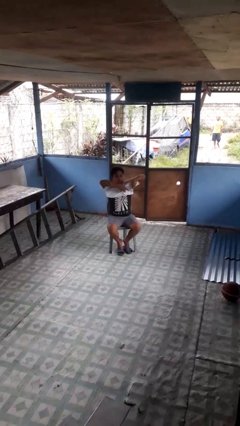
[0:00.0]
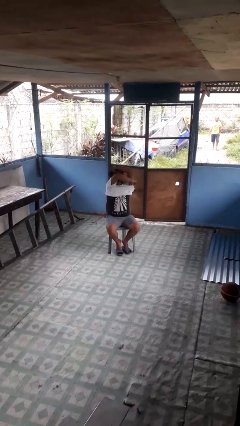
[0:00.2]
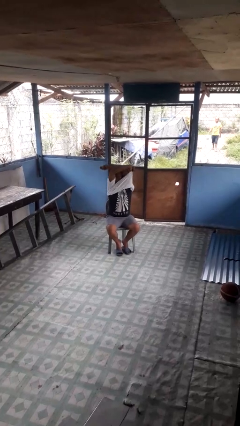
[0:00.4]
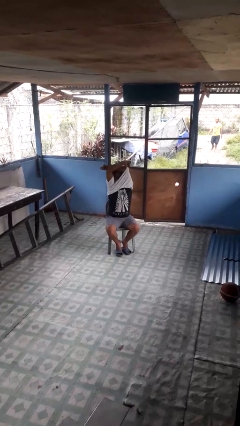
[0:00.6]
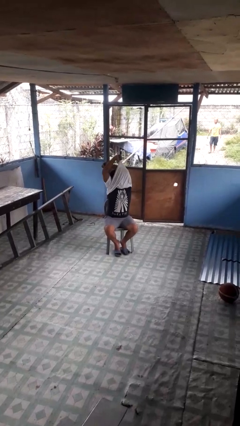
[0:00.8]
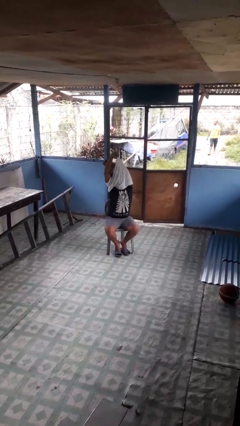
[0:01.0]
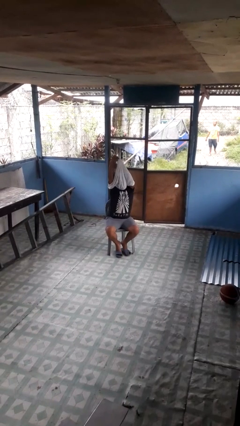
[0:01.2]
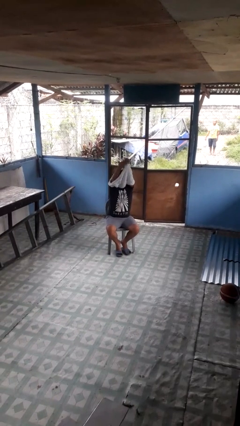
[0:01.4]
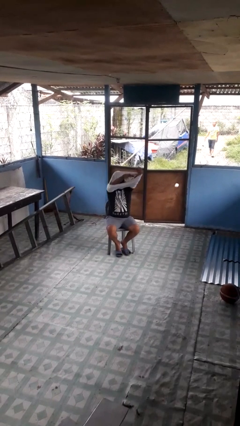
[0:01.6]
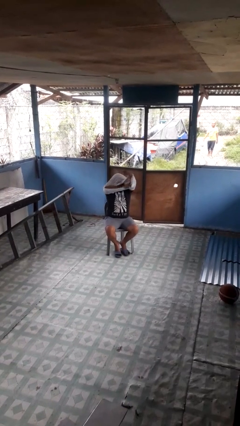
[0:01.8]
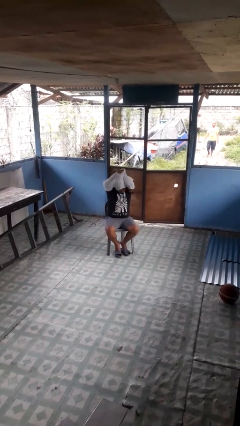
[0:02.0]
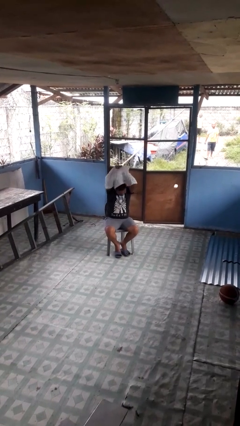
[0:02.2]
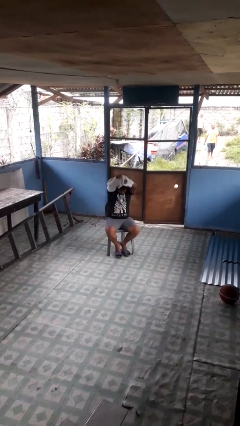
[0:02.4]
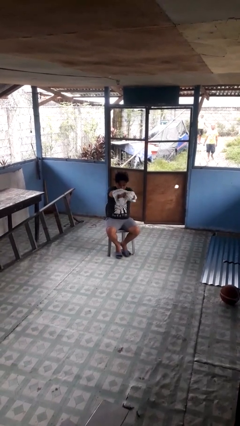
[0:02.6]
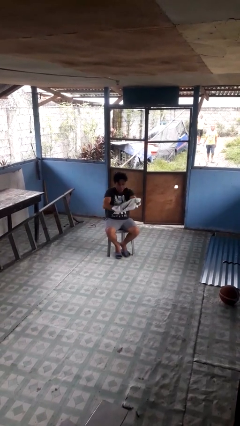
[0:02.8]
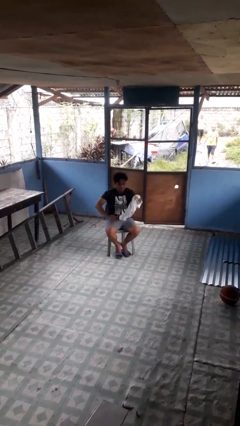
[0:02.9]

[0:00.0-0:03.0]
person takes off shirt

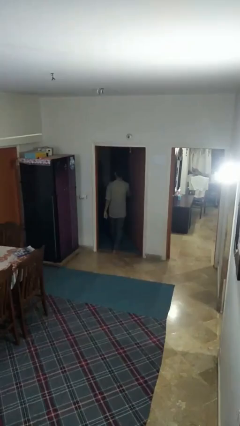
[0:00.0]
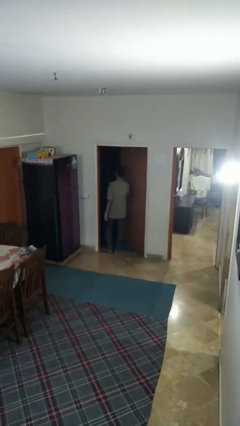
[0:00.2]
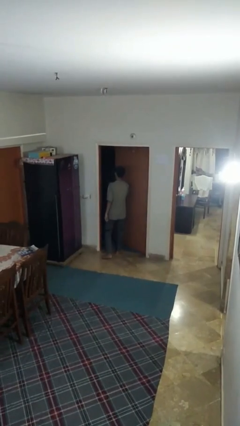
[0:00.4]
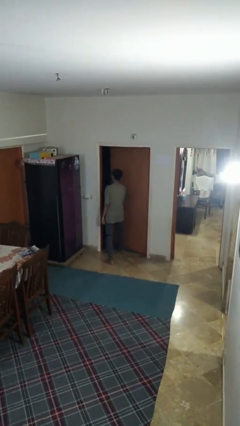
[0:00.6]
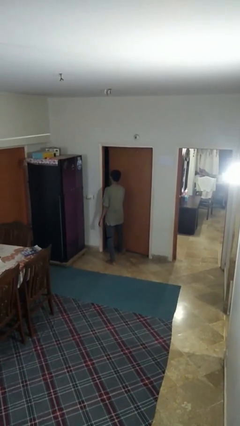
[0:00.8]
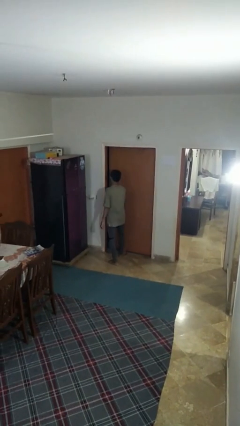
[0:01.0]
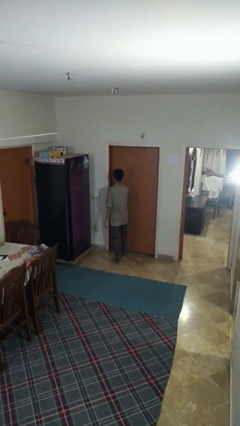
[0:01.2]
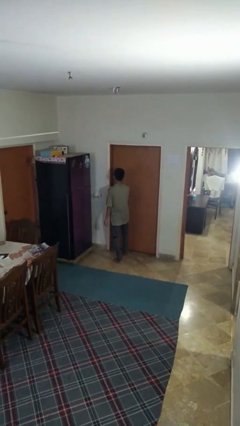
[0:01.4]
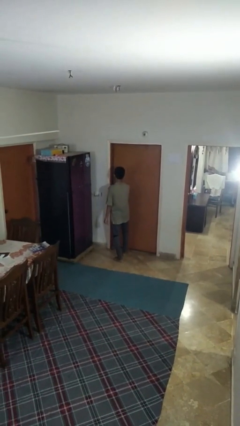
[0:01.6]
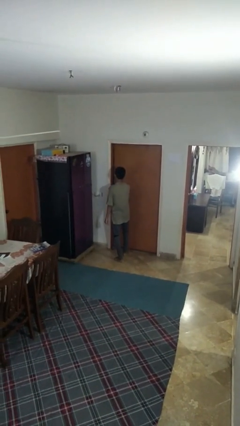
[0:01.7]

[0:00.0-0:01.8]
person closes facility door

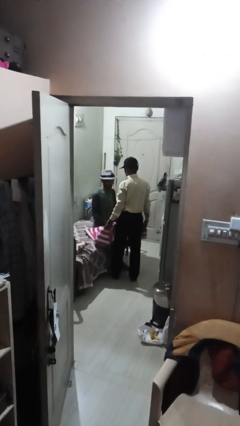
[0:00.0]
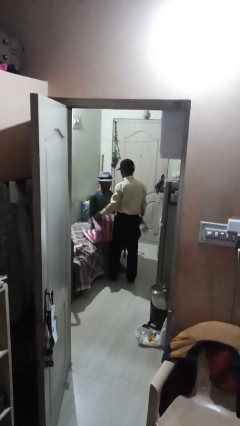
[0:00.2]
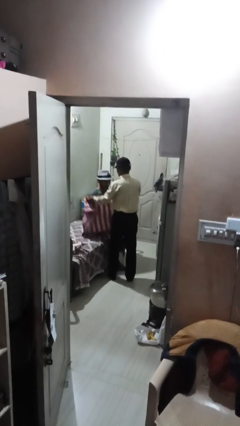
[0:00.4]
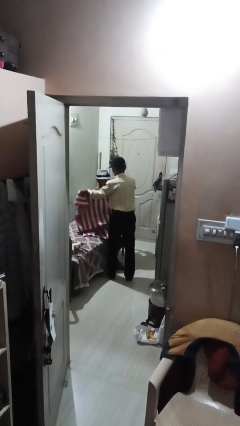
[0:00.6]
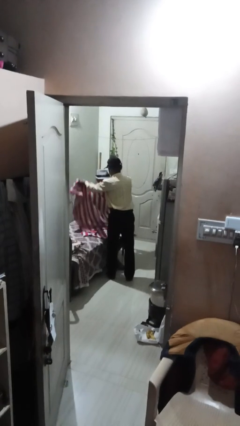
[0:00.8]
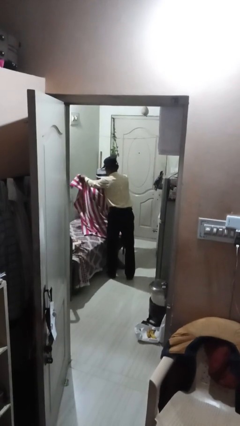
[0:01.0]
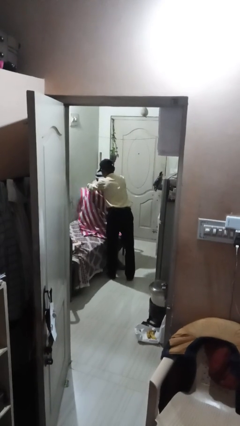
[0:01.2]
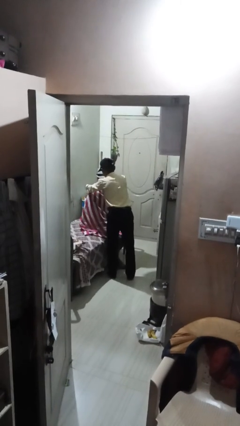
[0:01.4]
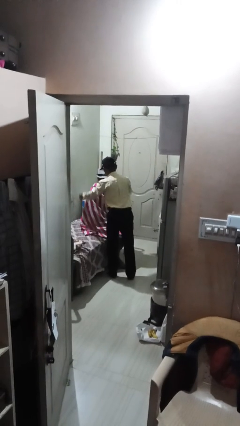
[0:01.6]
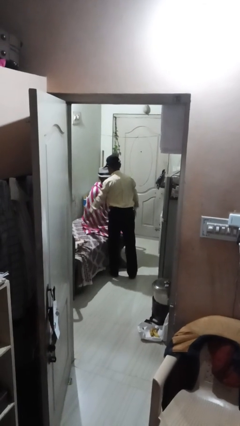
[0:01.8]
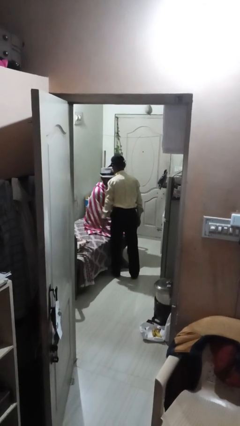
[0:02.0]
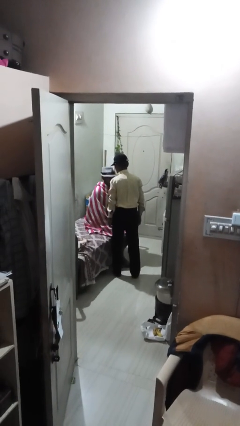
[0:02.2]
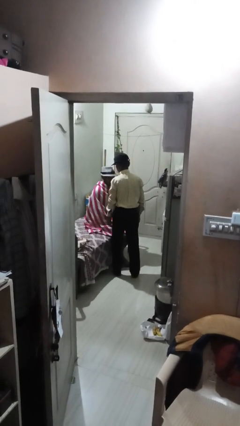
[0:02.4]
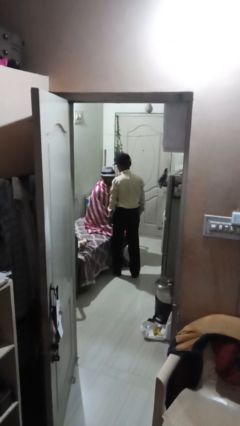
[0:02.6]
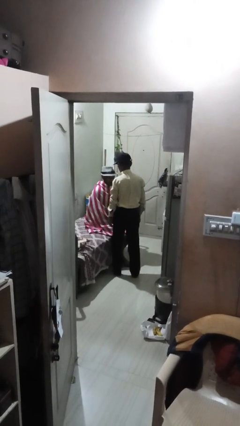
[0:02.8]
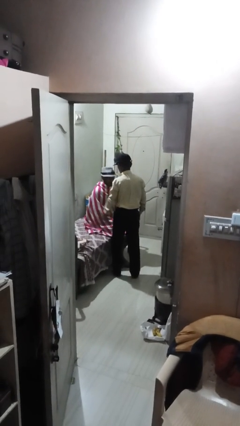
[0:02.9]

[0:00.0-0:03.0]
person covers friend with blanket

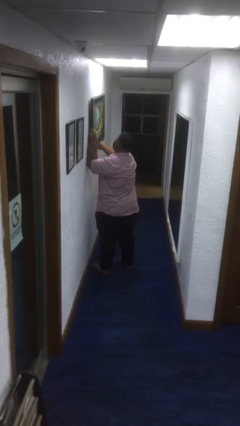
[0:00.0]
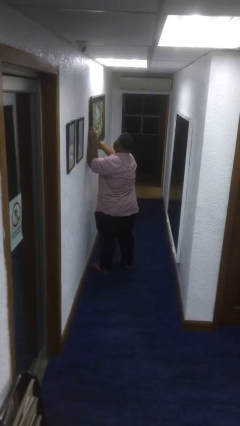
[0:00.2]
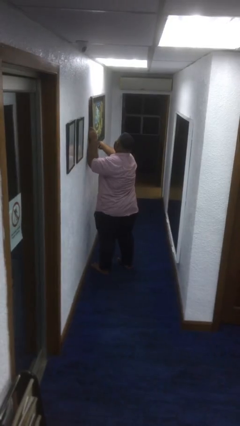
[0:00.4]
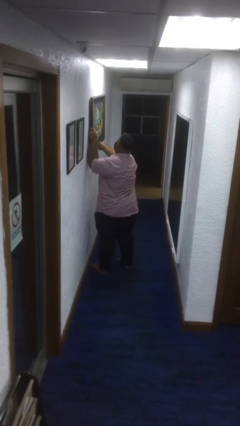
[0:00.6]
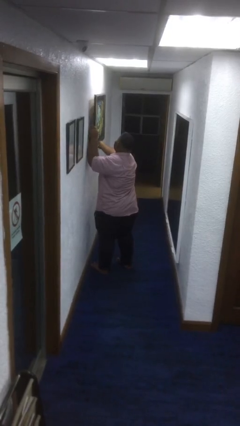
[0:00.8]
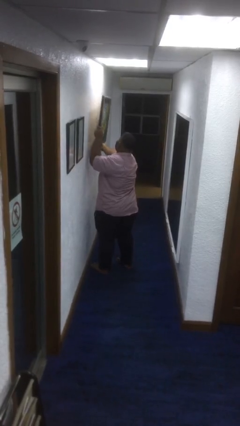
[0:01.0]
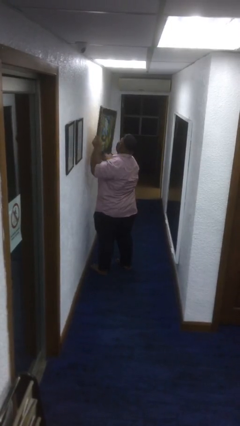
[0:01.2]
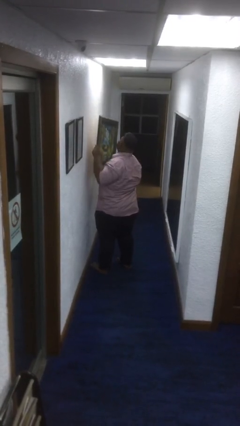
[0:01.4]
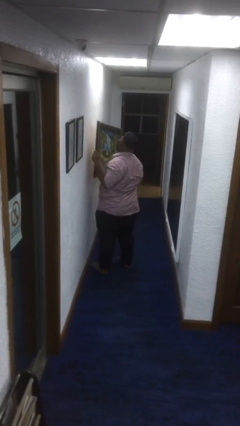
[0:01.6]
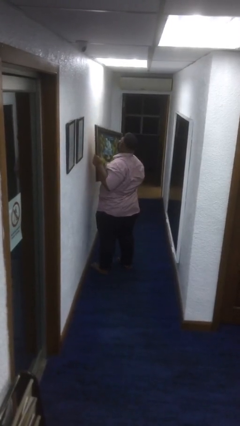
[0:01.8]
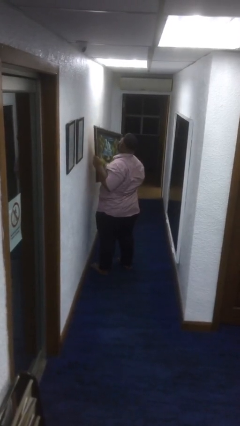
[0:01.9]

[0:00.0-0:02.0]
person takes down picture frame

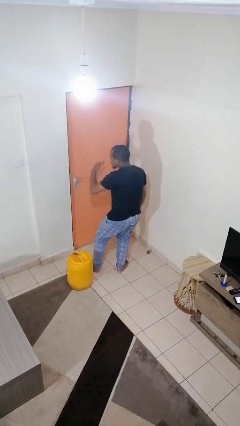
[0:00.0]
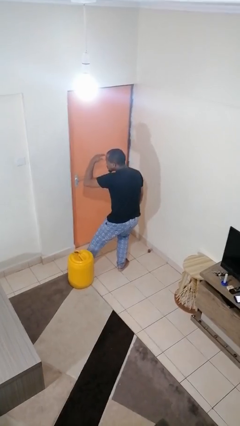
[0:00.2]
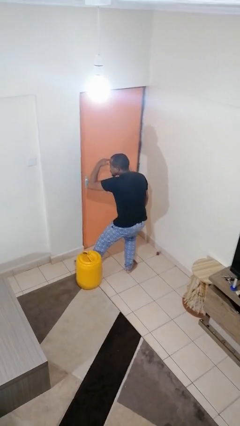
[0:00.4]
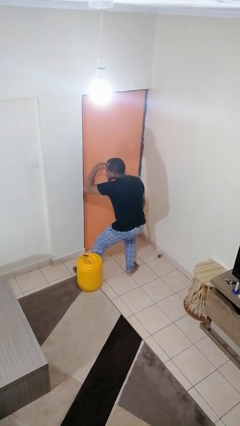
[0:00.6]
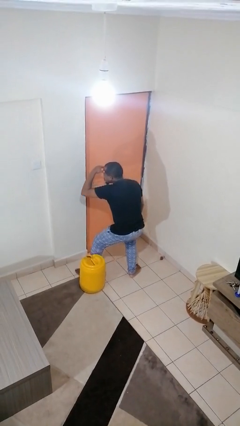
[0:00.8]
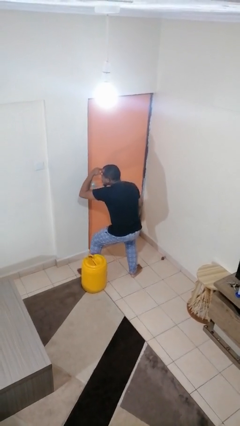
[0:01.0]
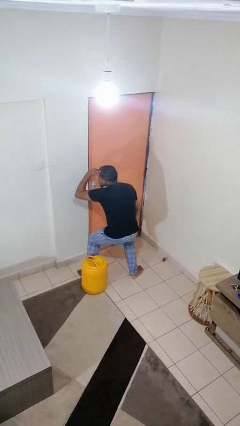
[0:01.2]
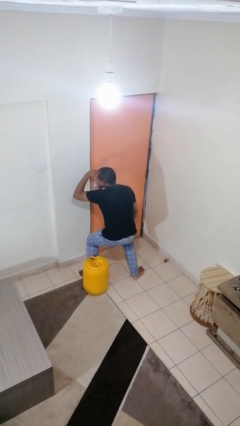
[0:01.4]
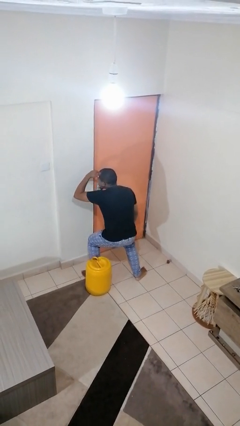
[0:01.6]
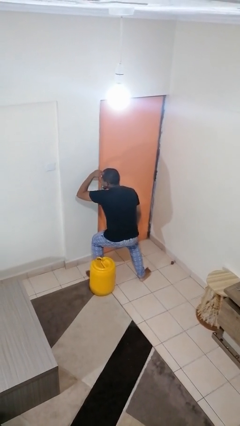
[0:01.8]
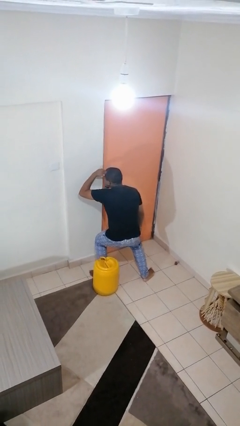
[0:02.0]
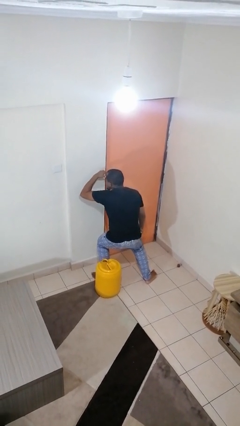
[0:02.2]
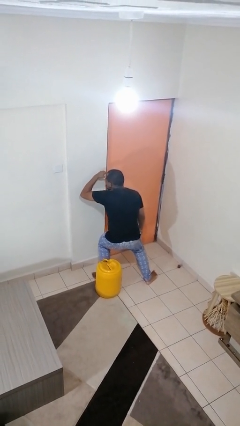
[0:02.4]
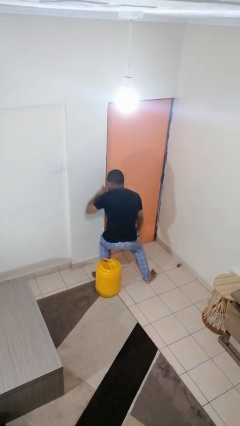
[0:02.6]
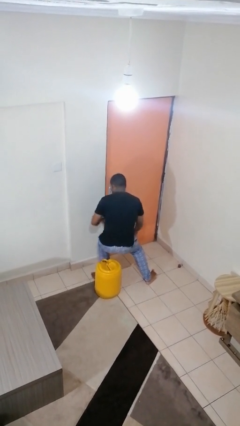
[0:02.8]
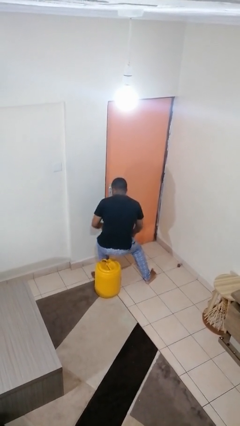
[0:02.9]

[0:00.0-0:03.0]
person shades eyes

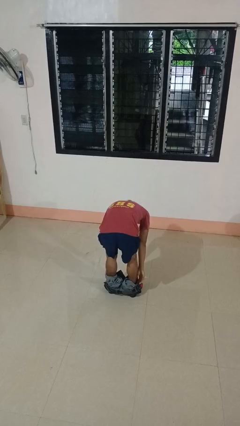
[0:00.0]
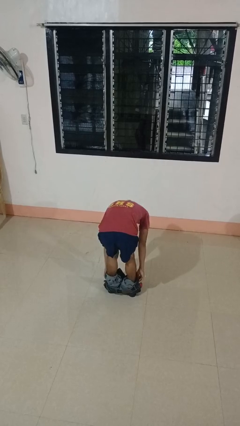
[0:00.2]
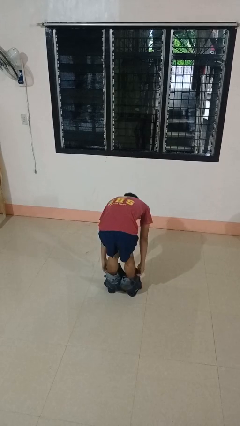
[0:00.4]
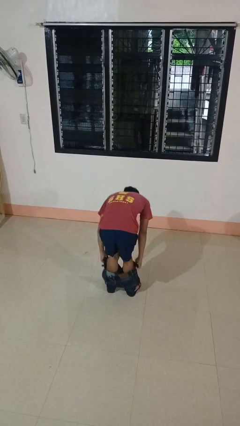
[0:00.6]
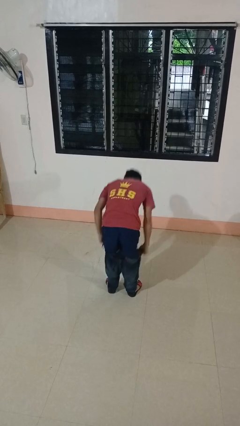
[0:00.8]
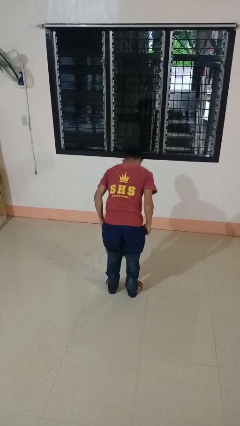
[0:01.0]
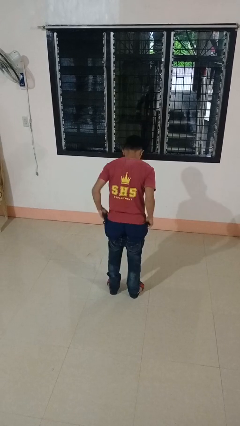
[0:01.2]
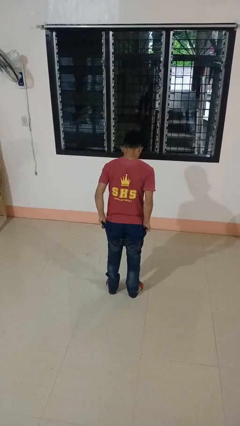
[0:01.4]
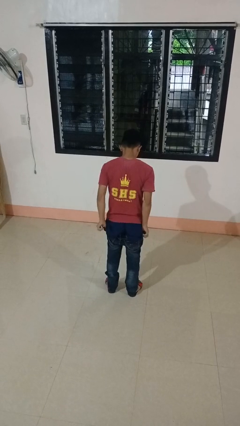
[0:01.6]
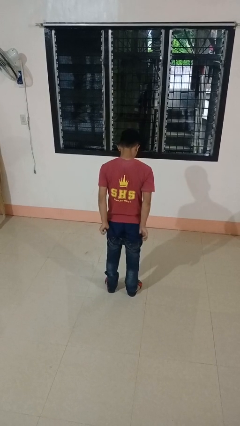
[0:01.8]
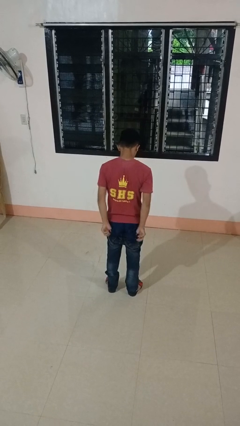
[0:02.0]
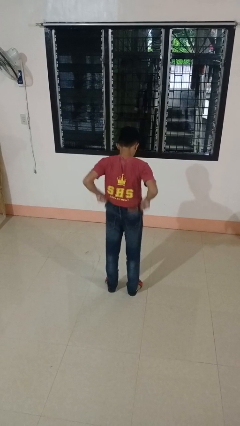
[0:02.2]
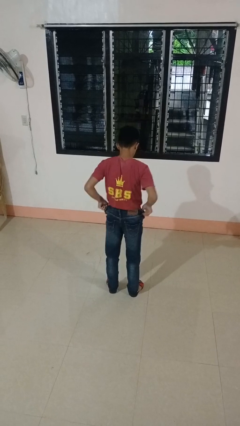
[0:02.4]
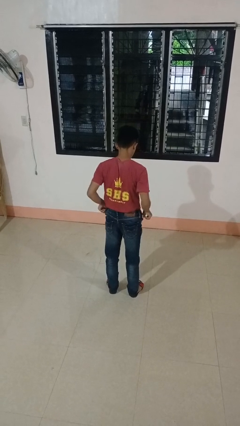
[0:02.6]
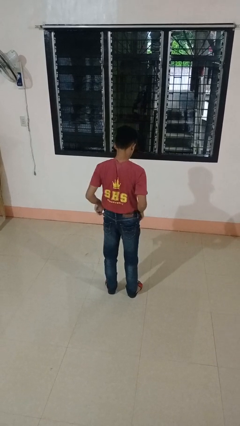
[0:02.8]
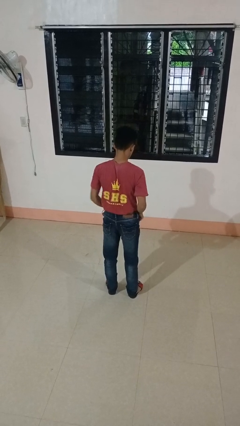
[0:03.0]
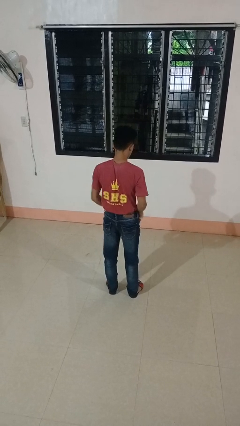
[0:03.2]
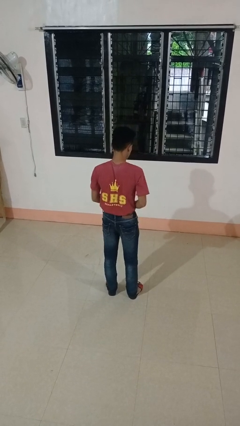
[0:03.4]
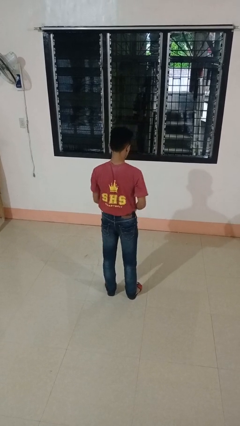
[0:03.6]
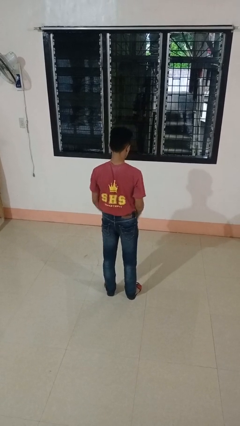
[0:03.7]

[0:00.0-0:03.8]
person puts on pants

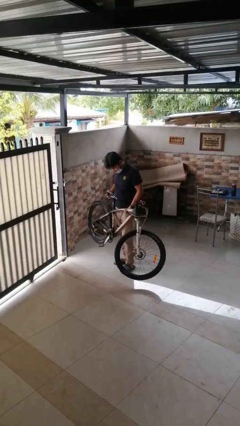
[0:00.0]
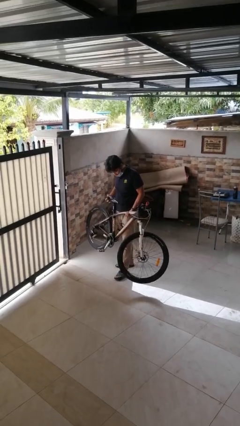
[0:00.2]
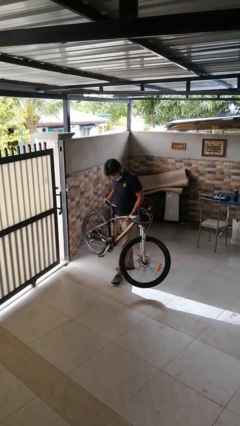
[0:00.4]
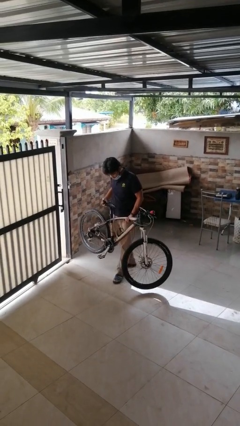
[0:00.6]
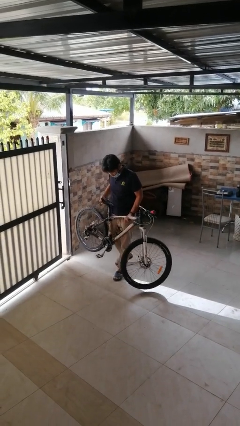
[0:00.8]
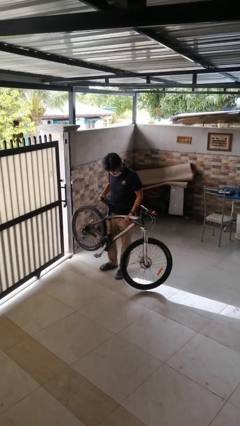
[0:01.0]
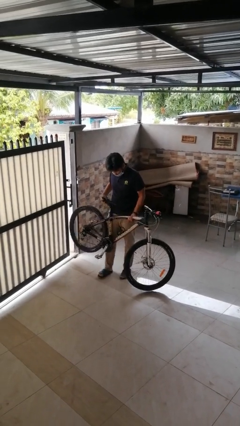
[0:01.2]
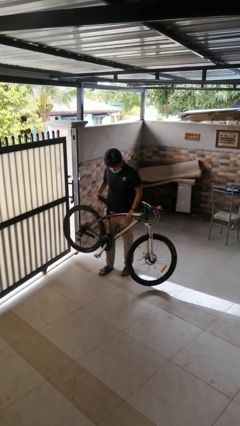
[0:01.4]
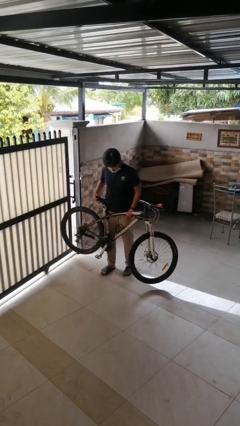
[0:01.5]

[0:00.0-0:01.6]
person carries bicycle
